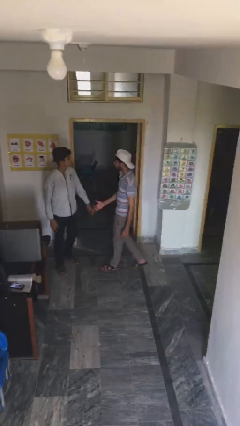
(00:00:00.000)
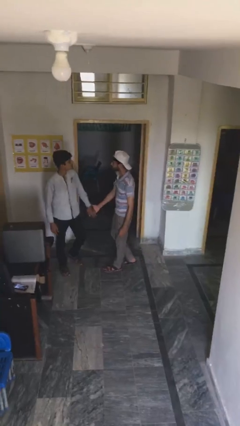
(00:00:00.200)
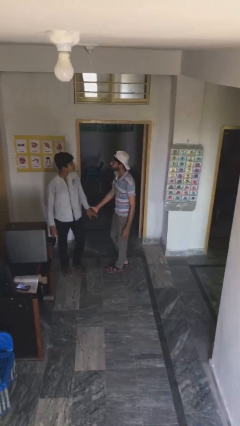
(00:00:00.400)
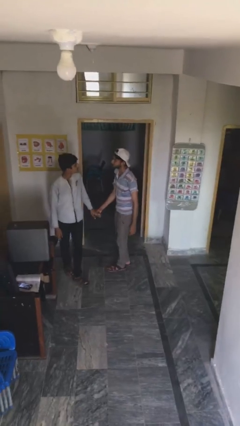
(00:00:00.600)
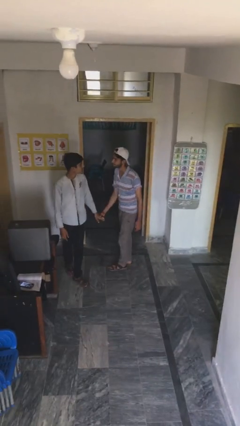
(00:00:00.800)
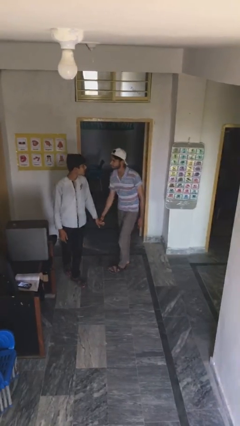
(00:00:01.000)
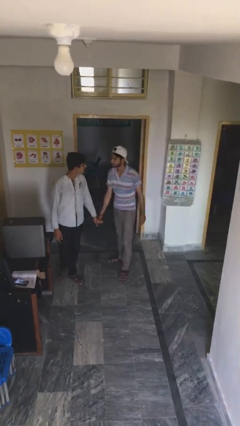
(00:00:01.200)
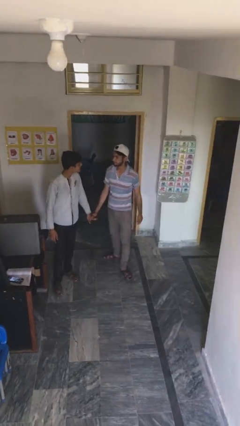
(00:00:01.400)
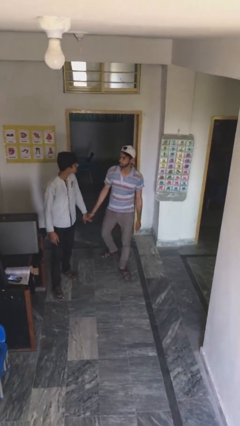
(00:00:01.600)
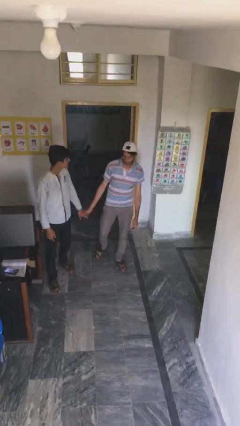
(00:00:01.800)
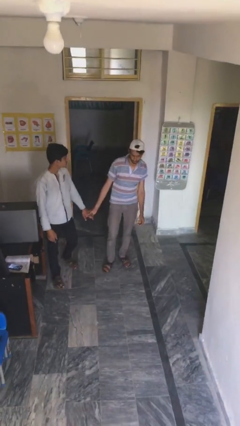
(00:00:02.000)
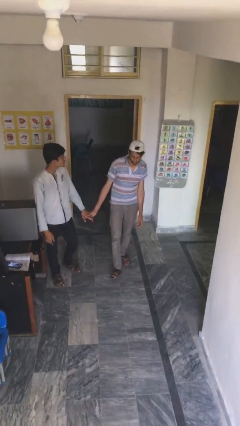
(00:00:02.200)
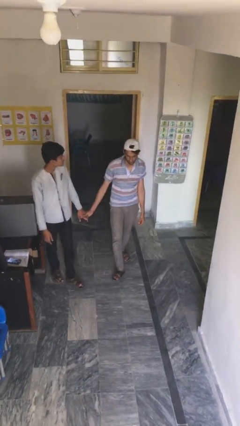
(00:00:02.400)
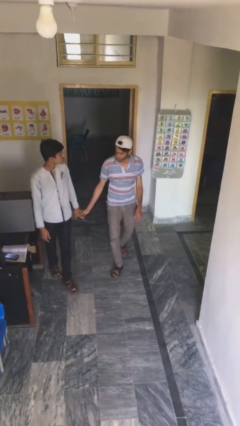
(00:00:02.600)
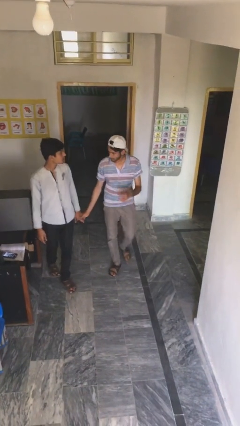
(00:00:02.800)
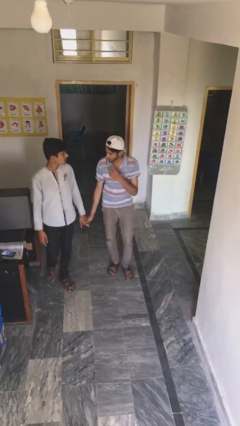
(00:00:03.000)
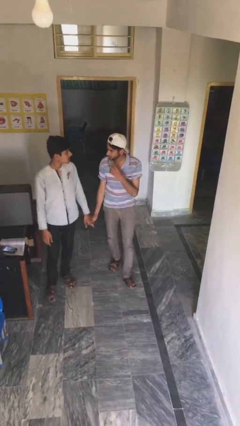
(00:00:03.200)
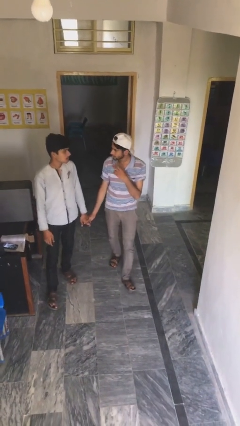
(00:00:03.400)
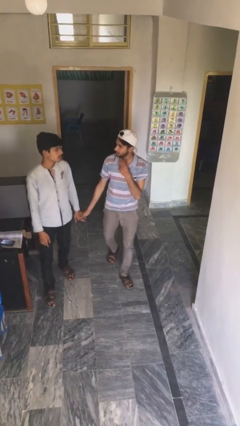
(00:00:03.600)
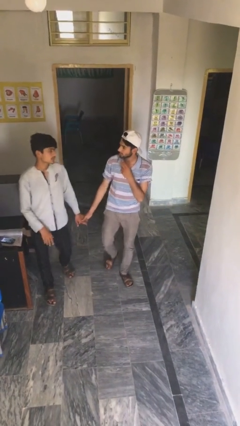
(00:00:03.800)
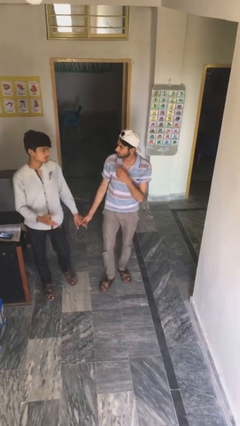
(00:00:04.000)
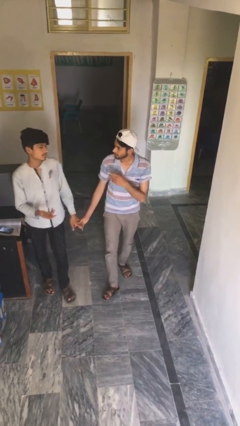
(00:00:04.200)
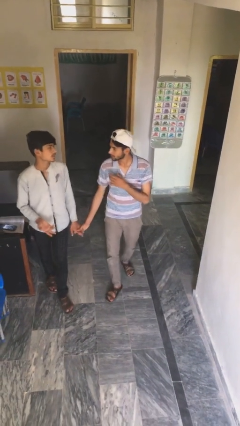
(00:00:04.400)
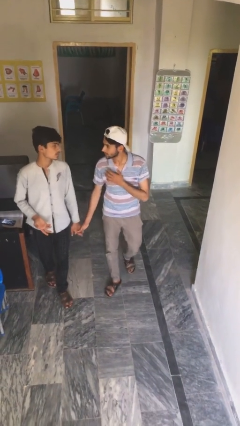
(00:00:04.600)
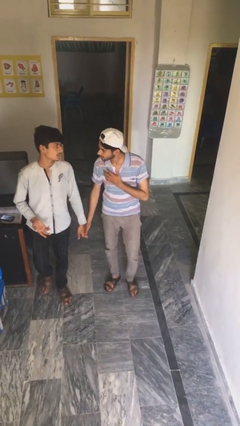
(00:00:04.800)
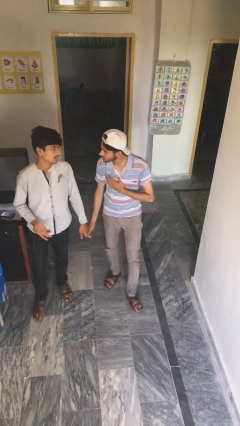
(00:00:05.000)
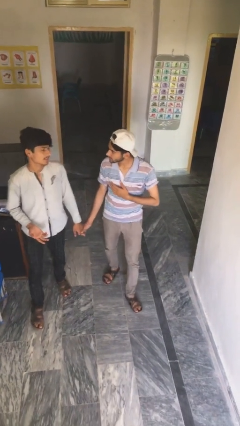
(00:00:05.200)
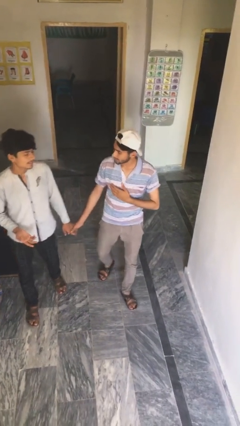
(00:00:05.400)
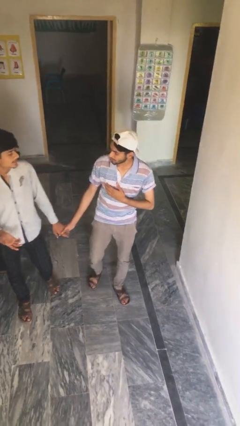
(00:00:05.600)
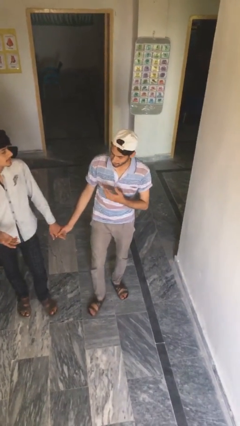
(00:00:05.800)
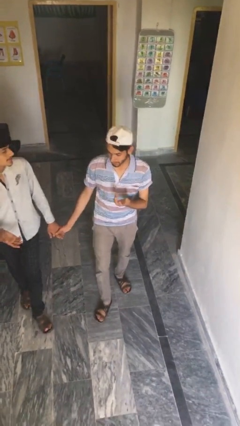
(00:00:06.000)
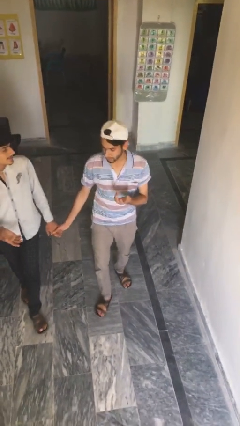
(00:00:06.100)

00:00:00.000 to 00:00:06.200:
person holds hand

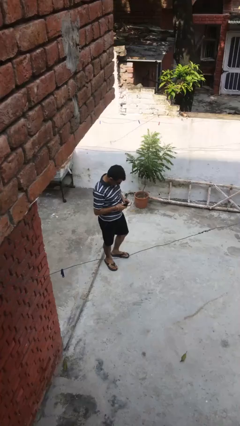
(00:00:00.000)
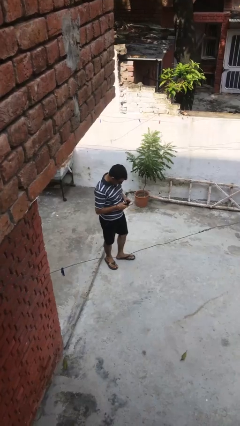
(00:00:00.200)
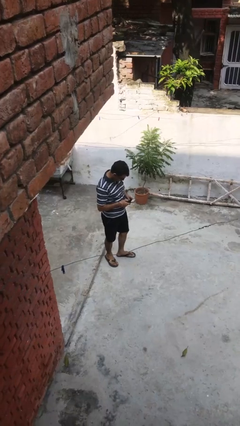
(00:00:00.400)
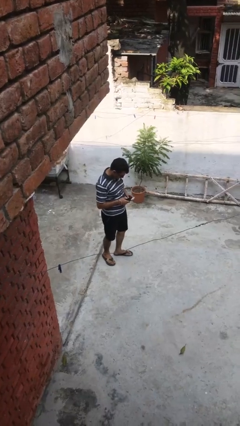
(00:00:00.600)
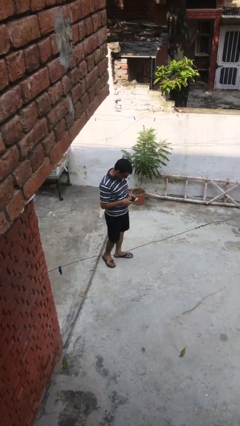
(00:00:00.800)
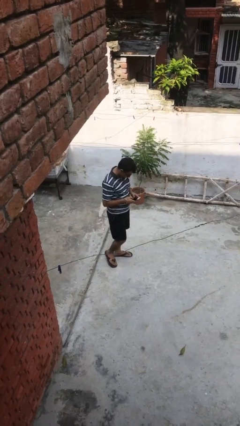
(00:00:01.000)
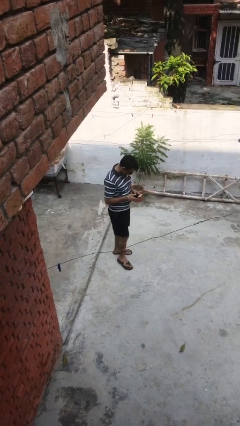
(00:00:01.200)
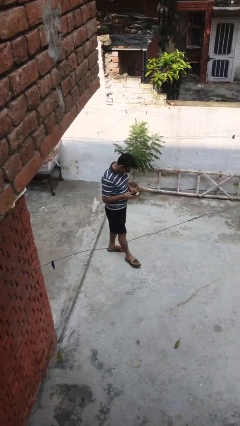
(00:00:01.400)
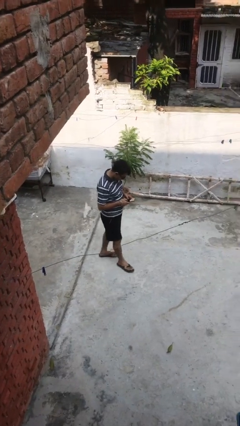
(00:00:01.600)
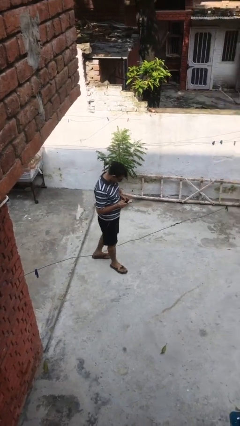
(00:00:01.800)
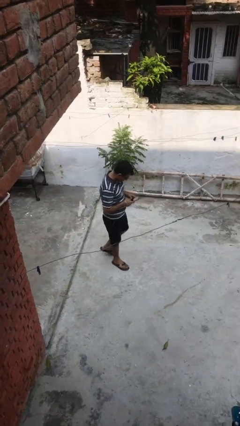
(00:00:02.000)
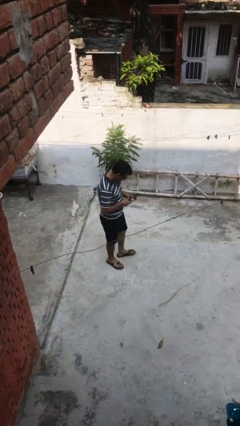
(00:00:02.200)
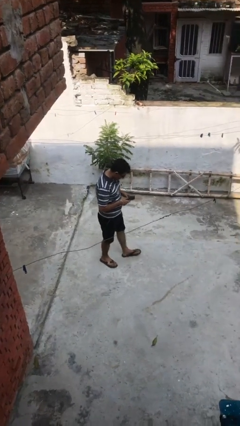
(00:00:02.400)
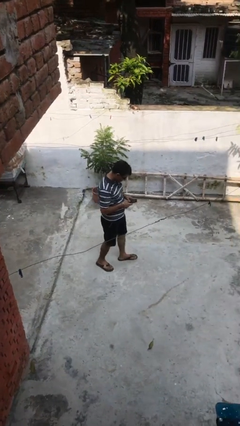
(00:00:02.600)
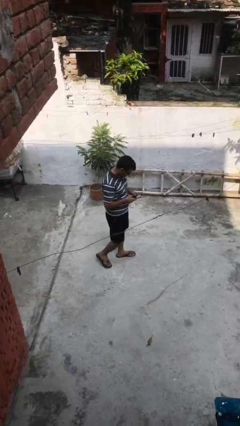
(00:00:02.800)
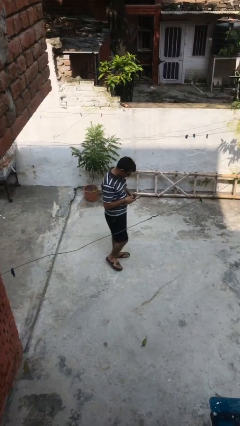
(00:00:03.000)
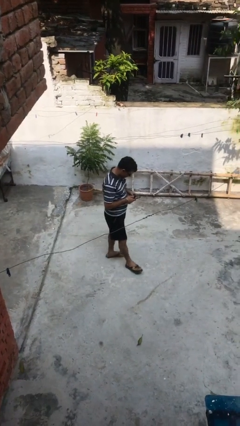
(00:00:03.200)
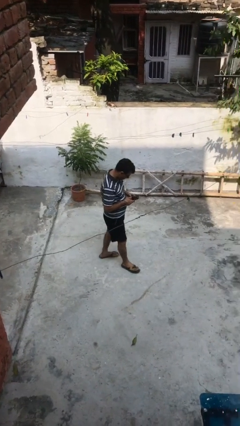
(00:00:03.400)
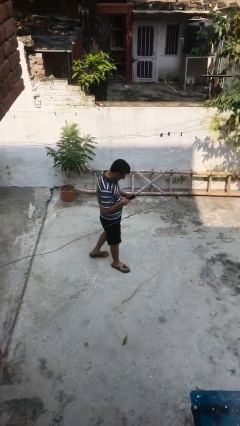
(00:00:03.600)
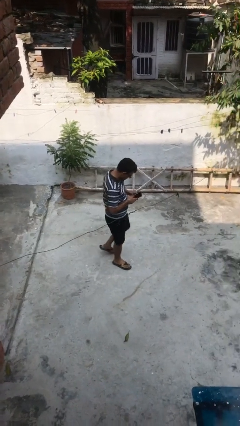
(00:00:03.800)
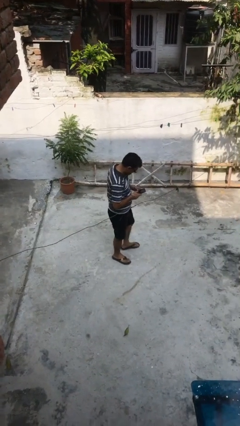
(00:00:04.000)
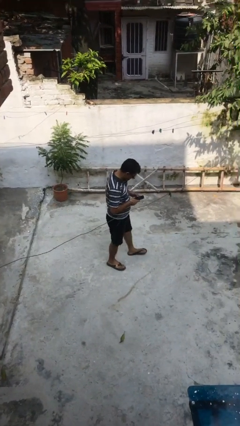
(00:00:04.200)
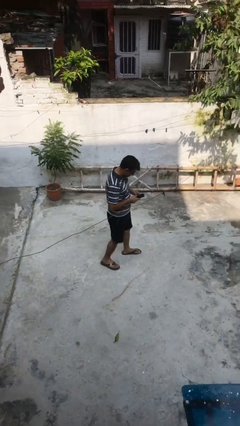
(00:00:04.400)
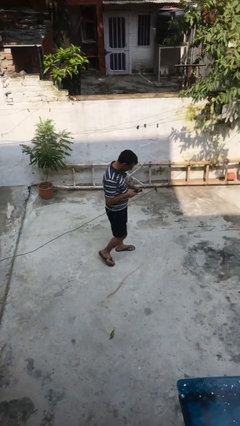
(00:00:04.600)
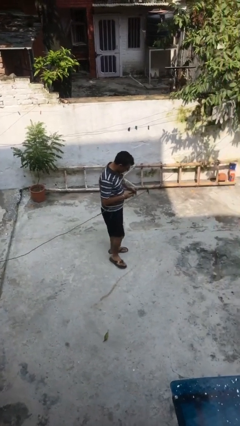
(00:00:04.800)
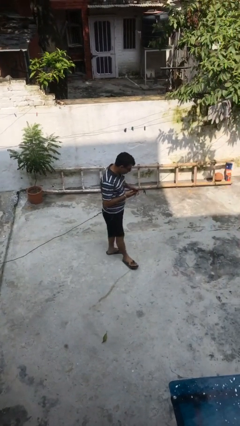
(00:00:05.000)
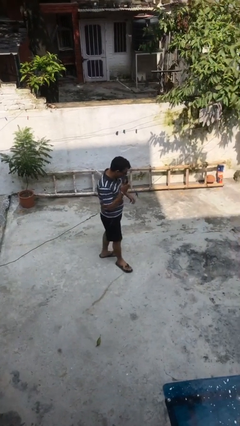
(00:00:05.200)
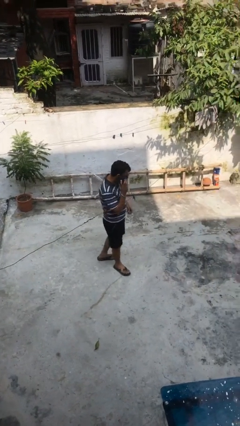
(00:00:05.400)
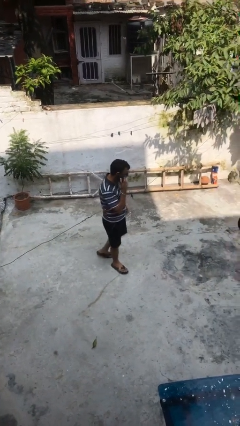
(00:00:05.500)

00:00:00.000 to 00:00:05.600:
person texts on phone

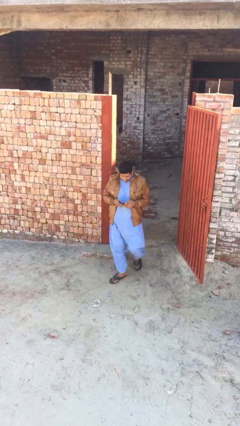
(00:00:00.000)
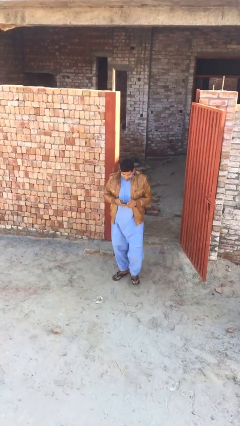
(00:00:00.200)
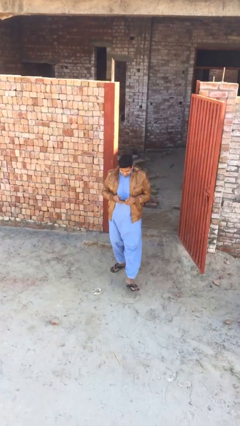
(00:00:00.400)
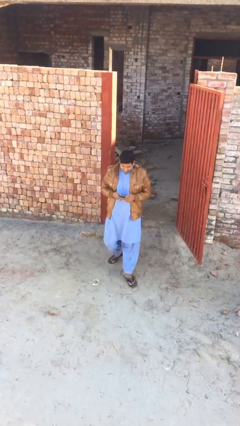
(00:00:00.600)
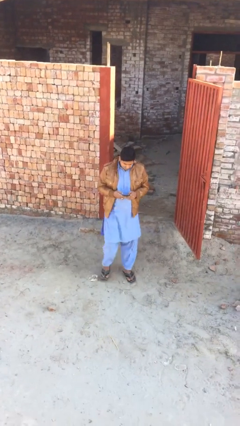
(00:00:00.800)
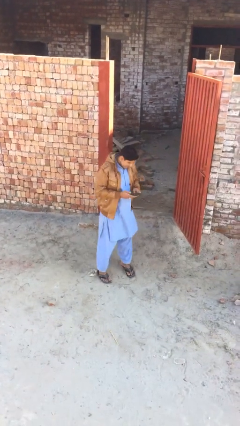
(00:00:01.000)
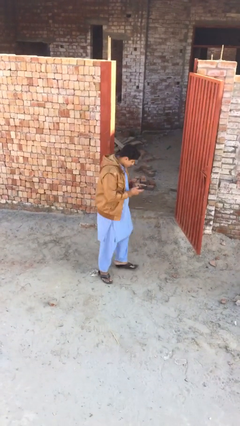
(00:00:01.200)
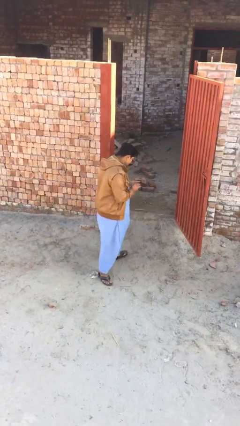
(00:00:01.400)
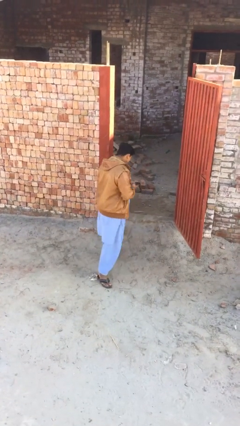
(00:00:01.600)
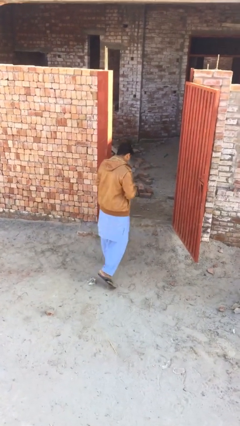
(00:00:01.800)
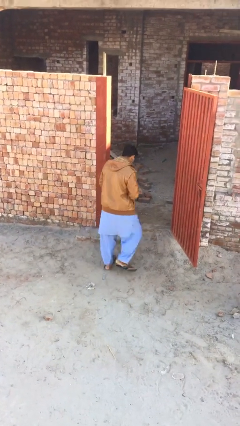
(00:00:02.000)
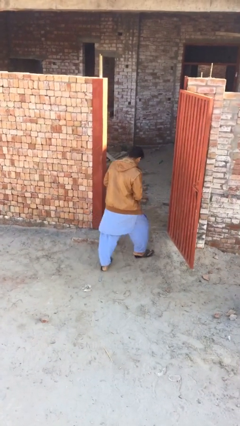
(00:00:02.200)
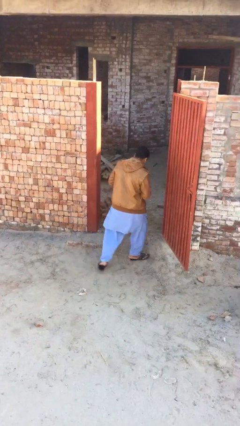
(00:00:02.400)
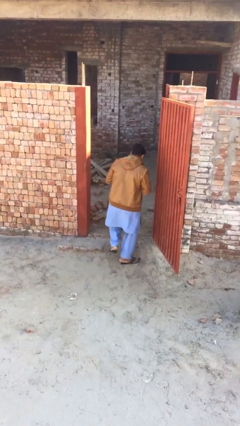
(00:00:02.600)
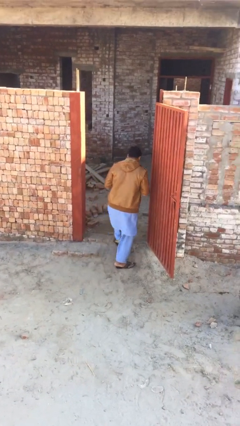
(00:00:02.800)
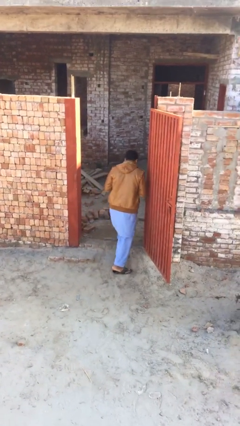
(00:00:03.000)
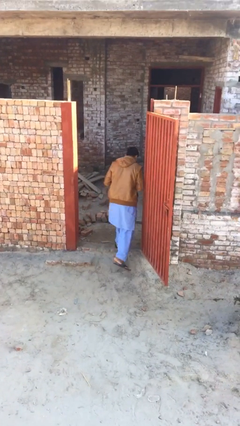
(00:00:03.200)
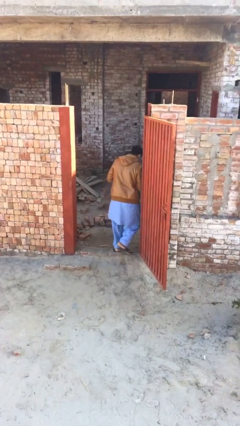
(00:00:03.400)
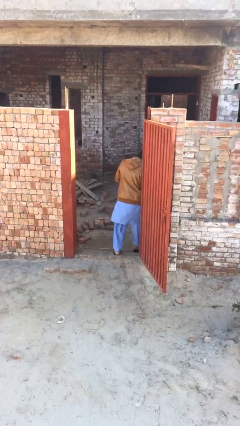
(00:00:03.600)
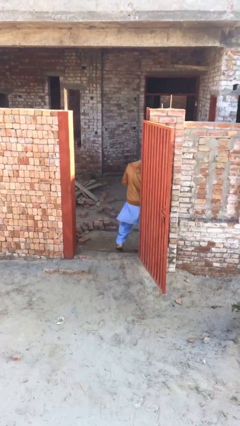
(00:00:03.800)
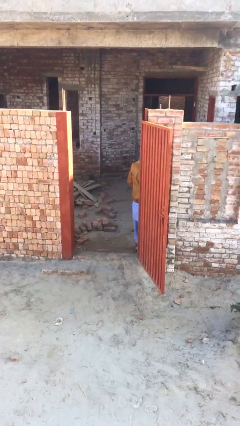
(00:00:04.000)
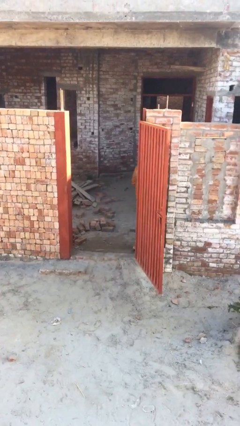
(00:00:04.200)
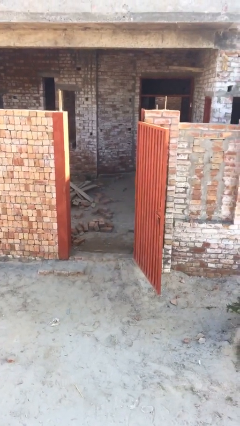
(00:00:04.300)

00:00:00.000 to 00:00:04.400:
person exits scene through structure

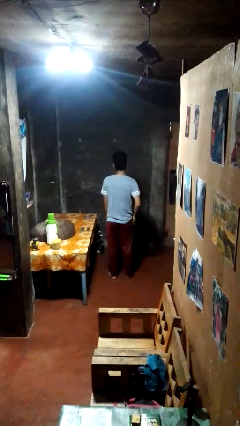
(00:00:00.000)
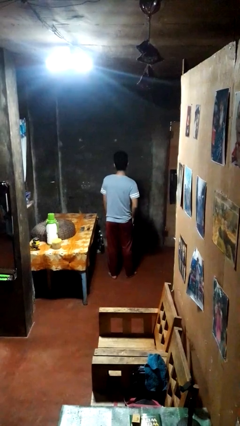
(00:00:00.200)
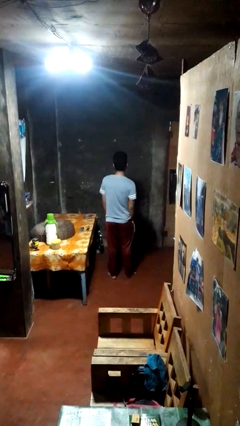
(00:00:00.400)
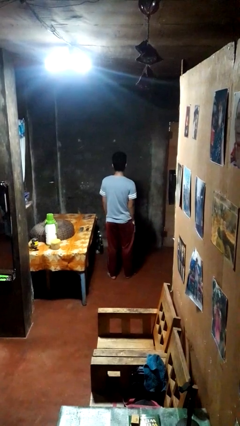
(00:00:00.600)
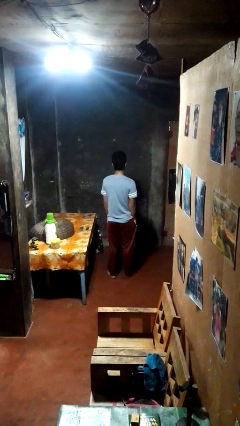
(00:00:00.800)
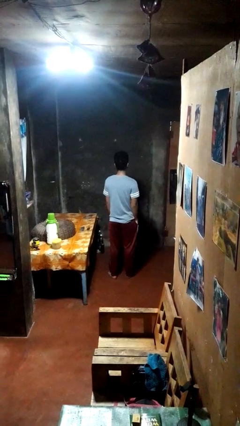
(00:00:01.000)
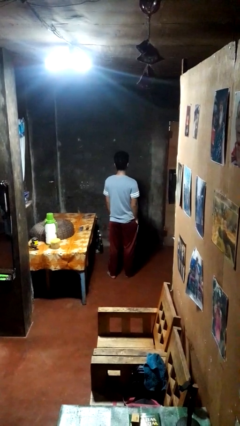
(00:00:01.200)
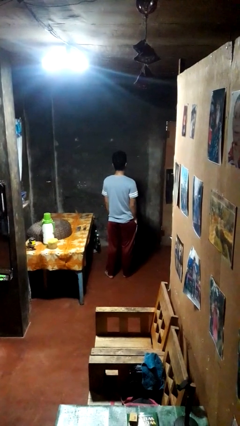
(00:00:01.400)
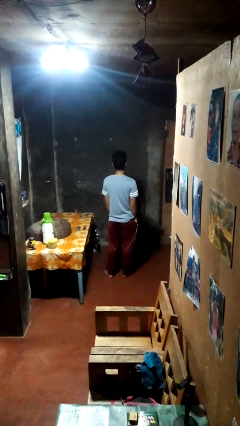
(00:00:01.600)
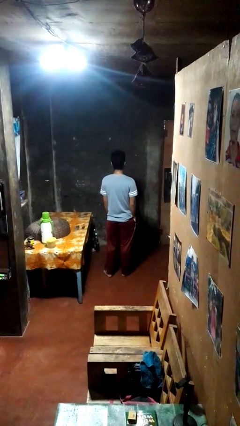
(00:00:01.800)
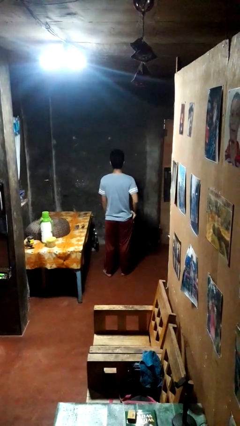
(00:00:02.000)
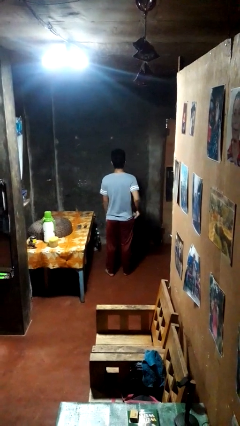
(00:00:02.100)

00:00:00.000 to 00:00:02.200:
person puts hands in back pockets
